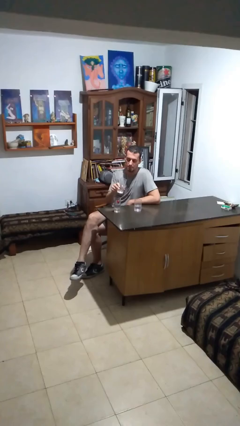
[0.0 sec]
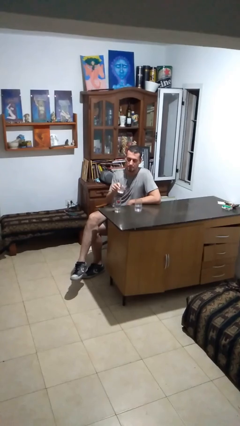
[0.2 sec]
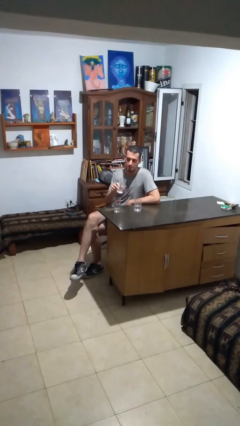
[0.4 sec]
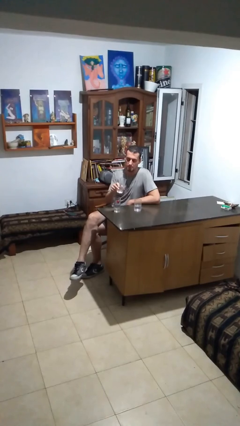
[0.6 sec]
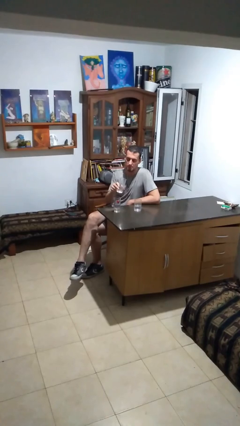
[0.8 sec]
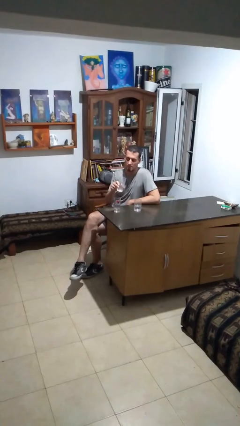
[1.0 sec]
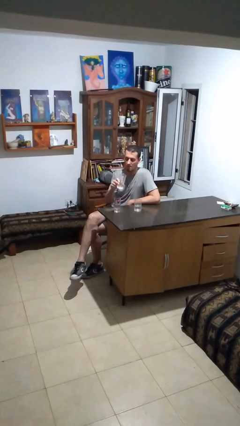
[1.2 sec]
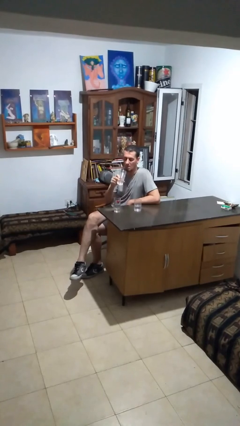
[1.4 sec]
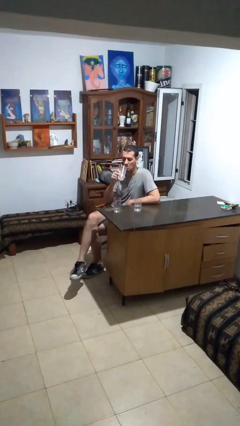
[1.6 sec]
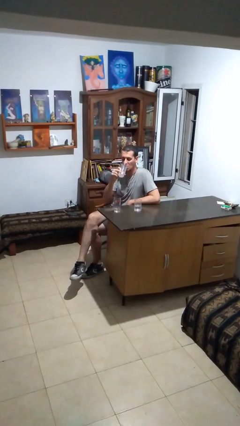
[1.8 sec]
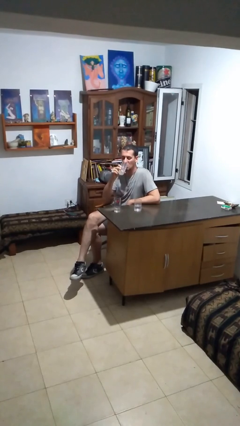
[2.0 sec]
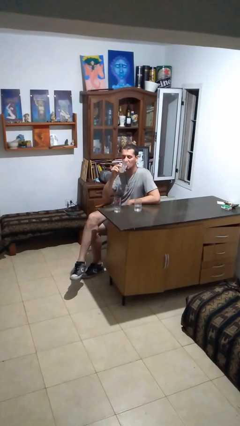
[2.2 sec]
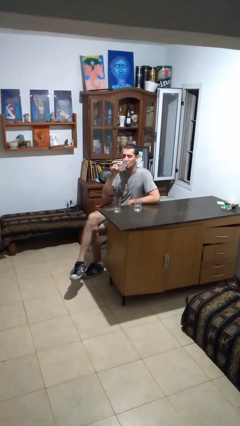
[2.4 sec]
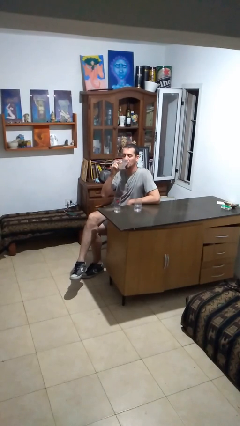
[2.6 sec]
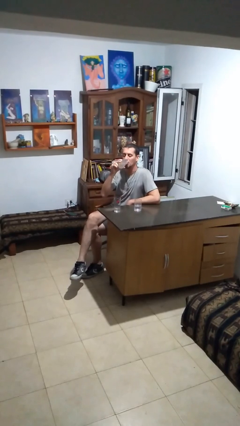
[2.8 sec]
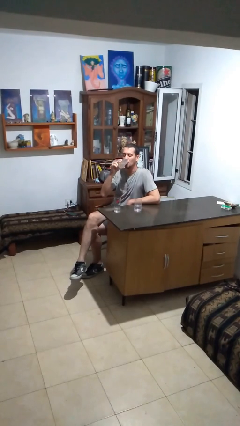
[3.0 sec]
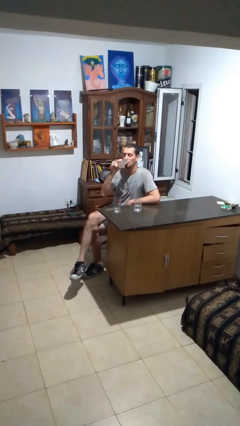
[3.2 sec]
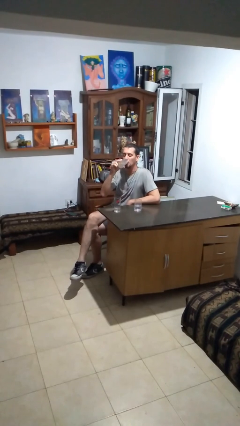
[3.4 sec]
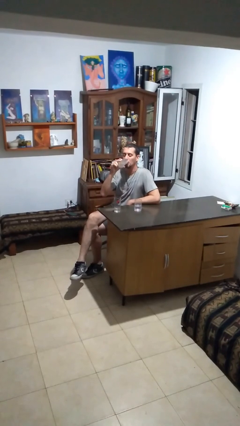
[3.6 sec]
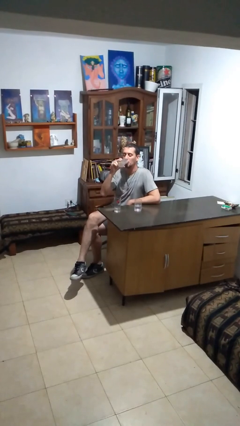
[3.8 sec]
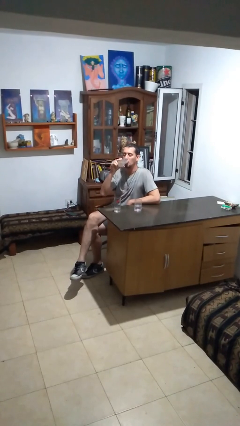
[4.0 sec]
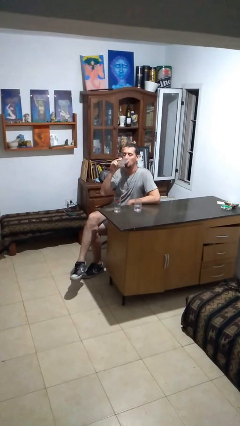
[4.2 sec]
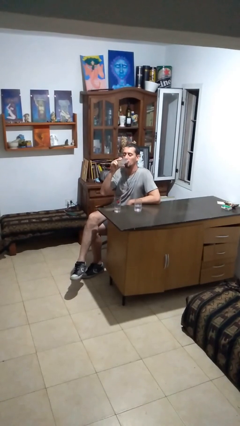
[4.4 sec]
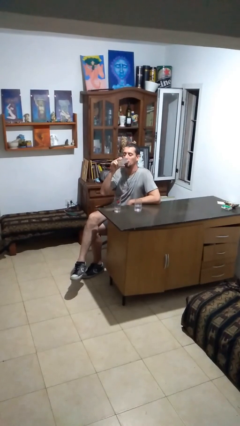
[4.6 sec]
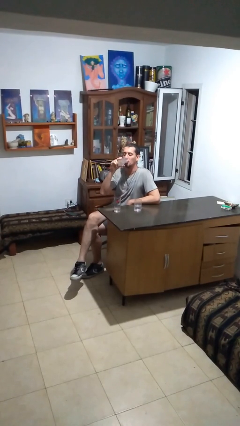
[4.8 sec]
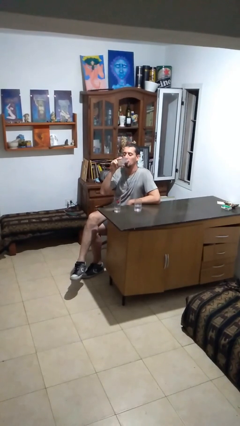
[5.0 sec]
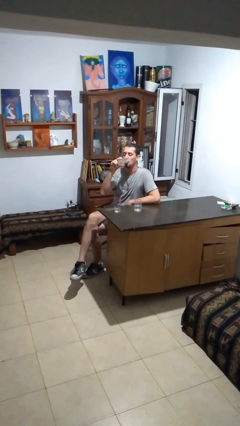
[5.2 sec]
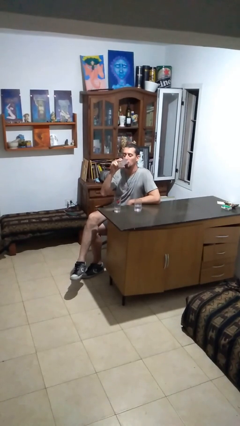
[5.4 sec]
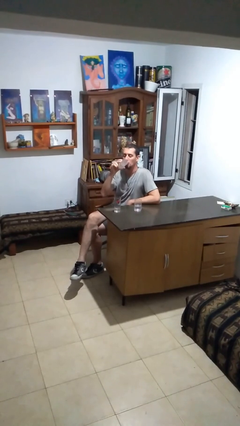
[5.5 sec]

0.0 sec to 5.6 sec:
person drinks from shotglass

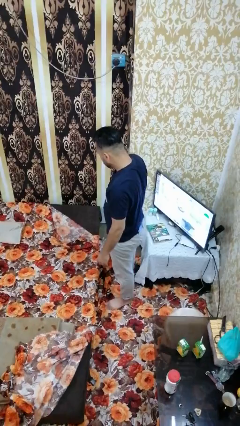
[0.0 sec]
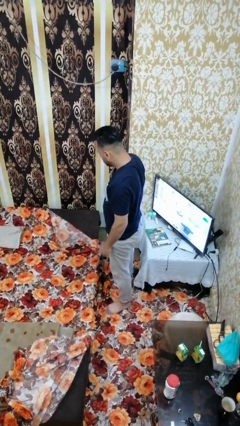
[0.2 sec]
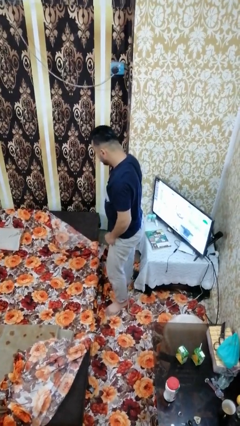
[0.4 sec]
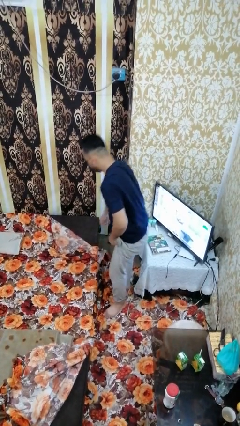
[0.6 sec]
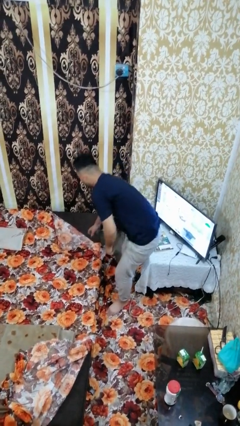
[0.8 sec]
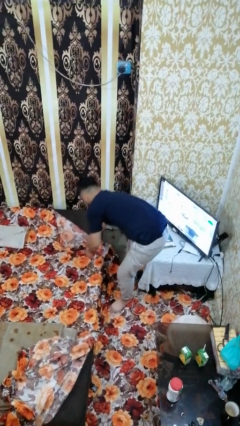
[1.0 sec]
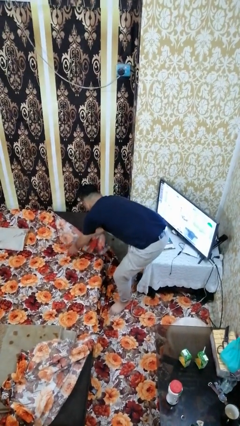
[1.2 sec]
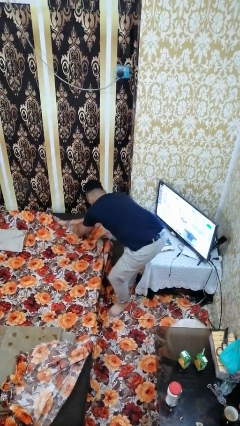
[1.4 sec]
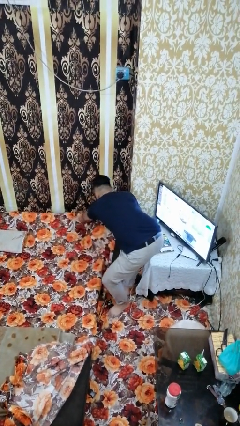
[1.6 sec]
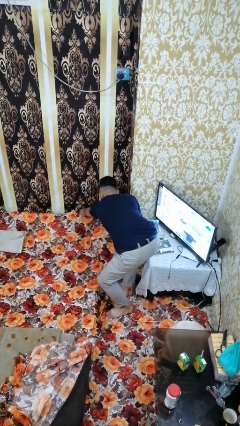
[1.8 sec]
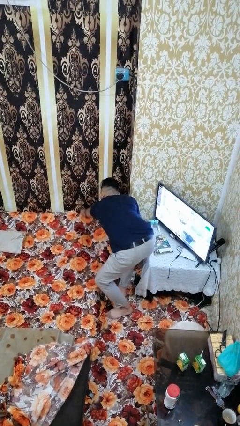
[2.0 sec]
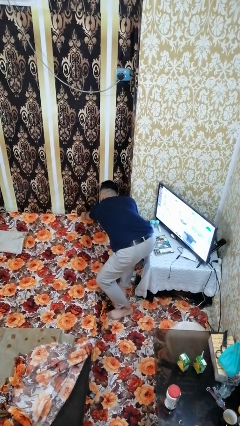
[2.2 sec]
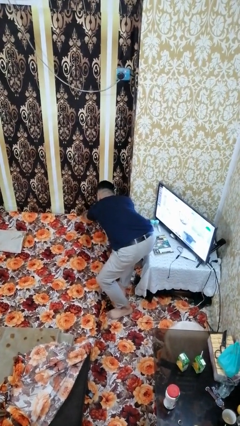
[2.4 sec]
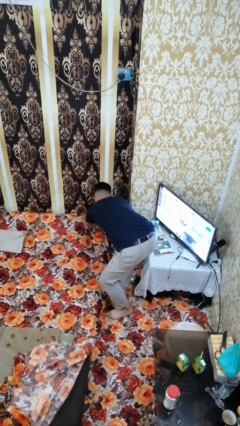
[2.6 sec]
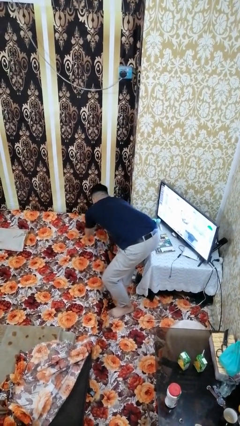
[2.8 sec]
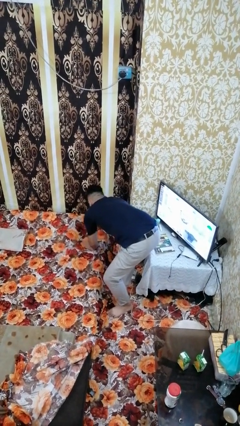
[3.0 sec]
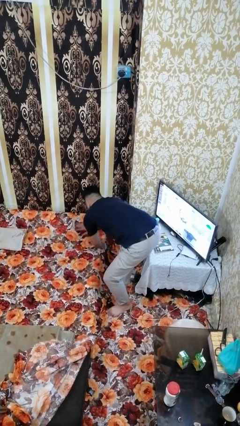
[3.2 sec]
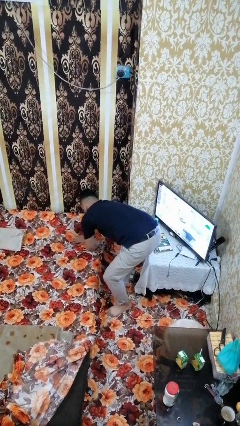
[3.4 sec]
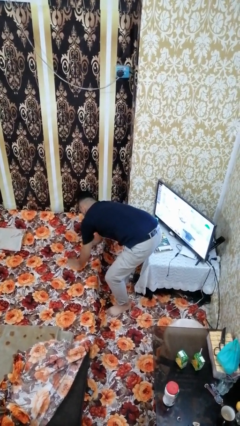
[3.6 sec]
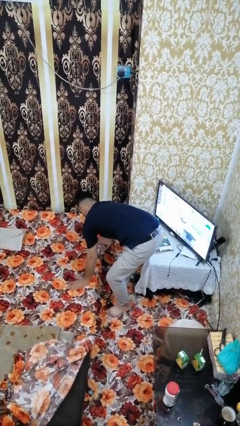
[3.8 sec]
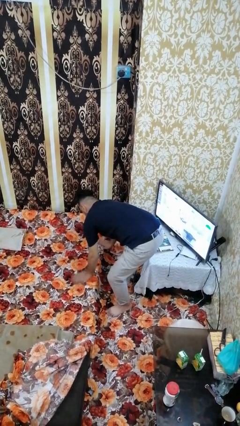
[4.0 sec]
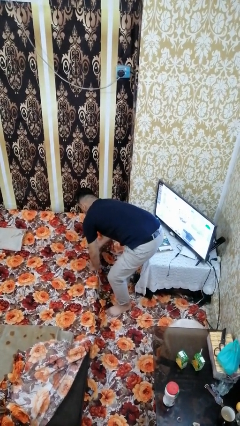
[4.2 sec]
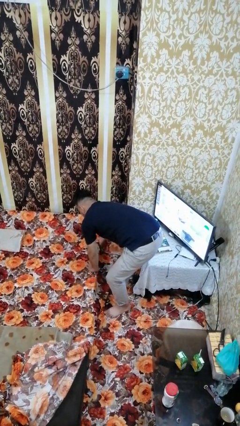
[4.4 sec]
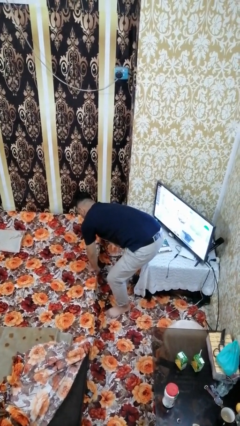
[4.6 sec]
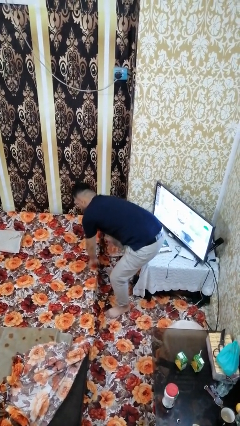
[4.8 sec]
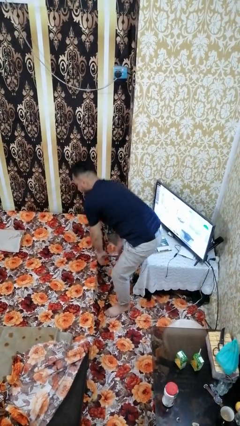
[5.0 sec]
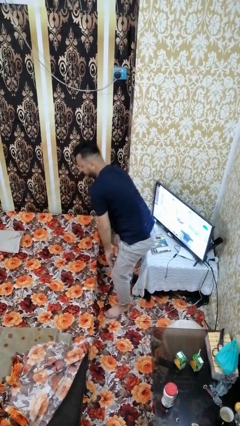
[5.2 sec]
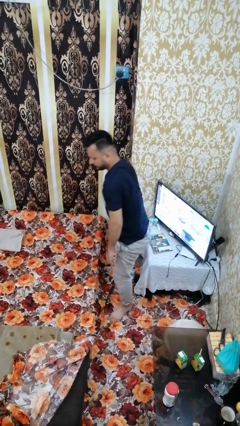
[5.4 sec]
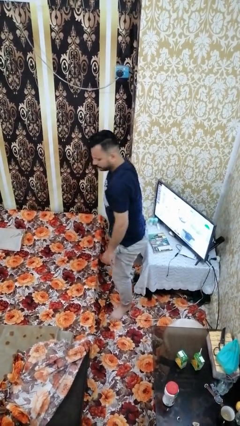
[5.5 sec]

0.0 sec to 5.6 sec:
person makes bed

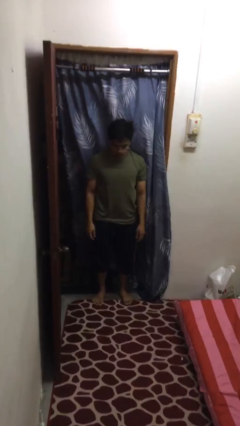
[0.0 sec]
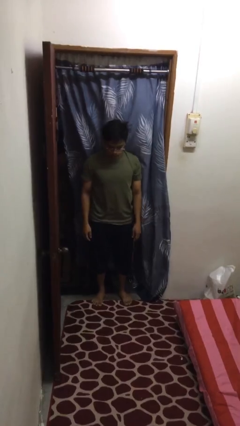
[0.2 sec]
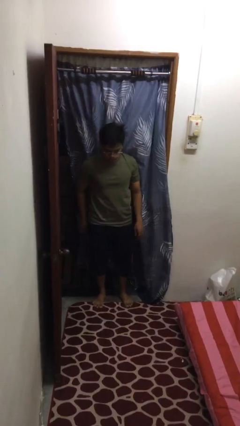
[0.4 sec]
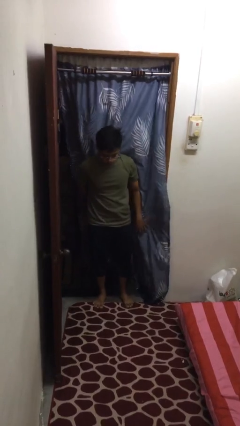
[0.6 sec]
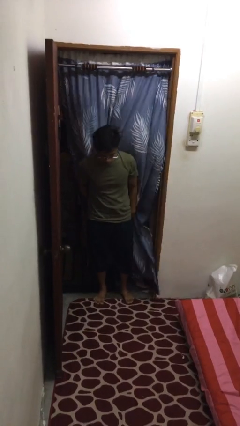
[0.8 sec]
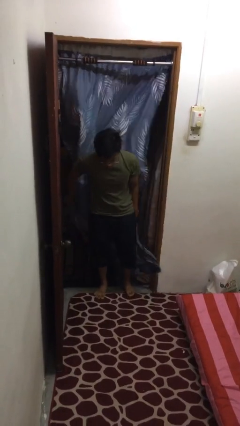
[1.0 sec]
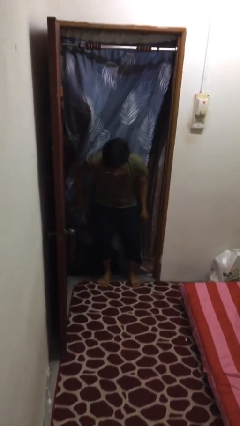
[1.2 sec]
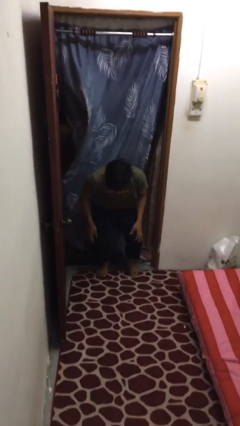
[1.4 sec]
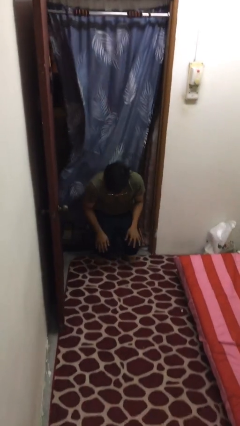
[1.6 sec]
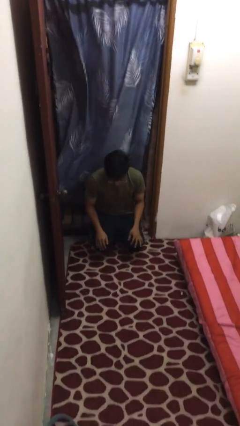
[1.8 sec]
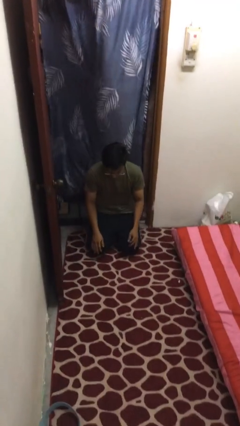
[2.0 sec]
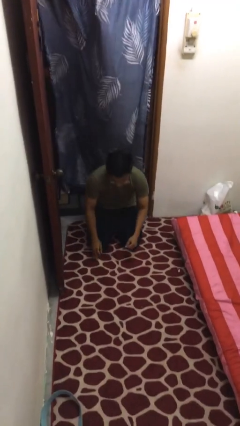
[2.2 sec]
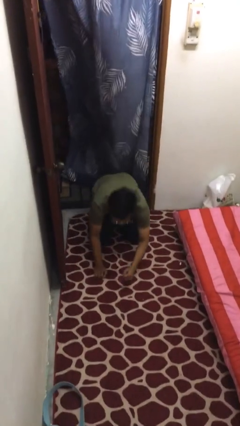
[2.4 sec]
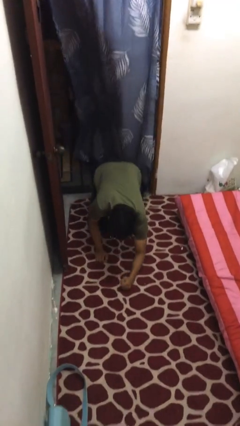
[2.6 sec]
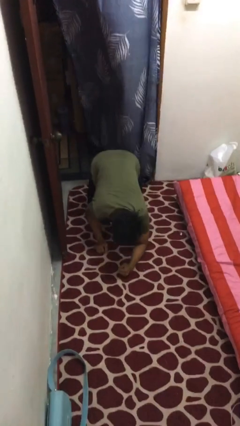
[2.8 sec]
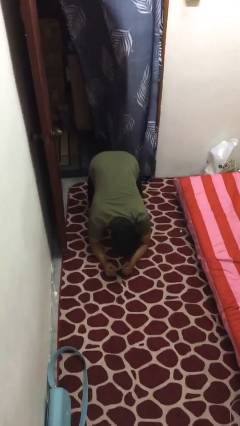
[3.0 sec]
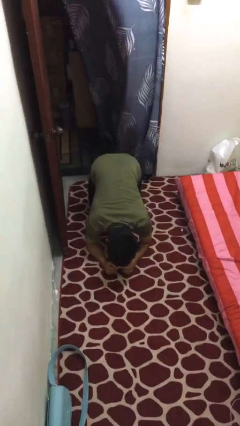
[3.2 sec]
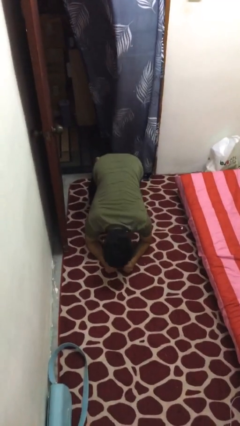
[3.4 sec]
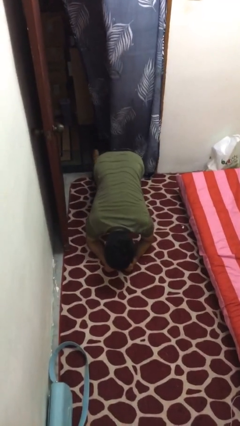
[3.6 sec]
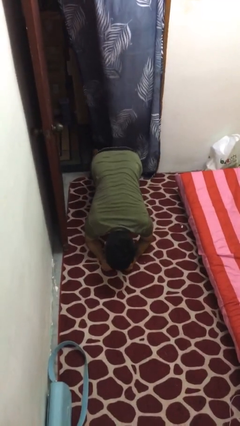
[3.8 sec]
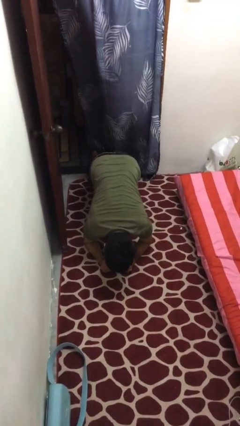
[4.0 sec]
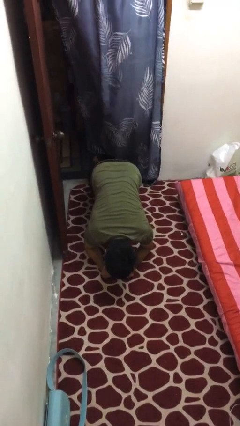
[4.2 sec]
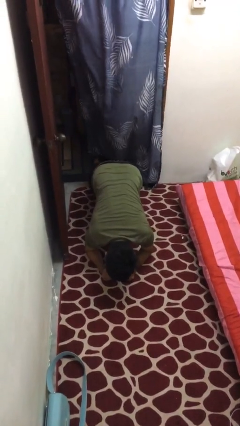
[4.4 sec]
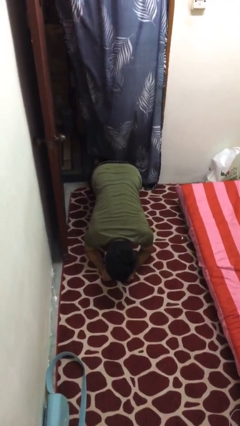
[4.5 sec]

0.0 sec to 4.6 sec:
person exercises with plank

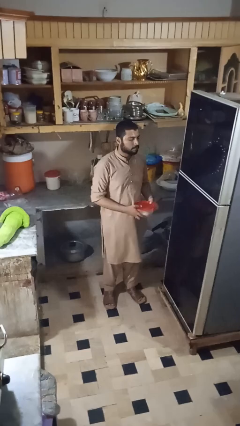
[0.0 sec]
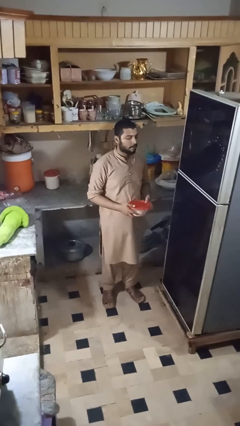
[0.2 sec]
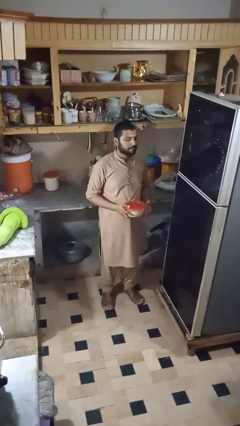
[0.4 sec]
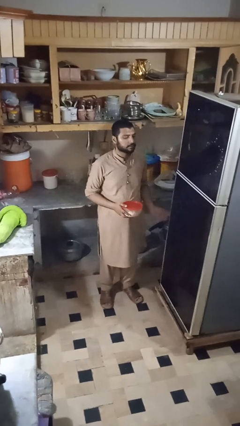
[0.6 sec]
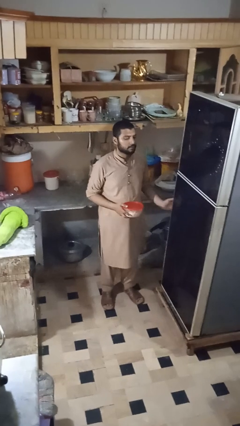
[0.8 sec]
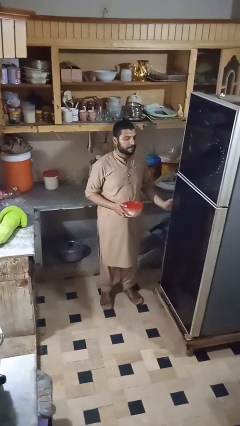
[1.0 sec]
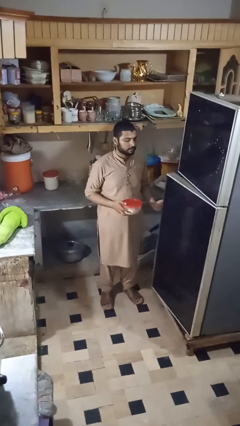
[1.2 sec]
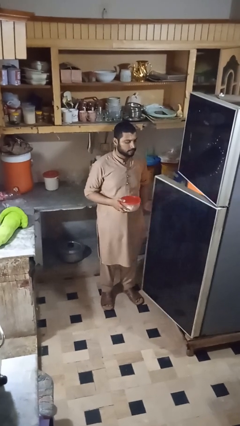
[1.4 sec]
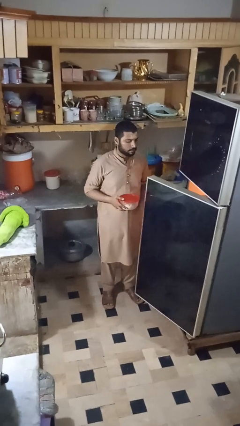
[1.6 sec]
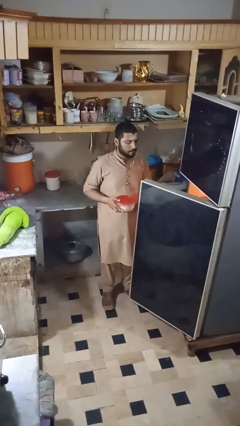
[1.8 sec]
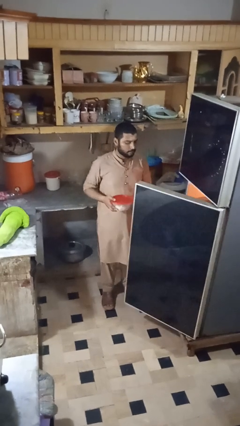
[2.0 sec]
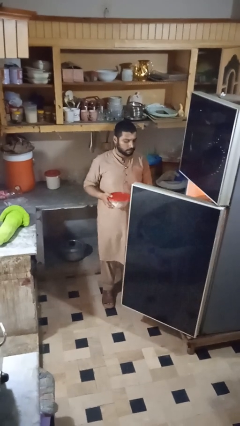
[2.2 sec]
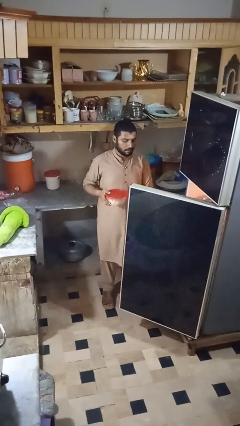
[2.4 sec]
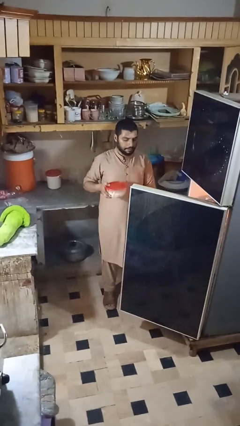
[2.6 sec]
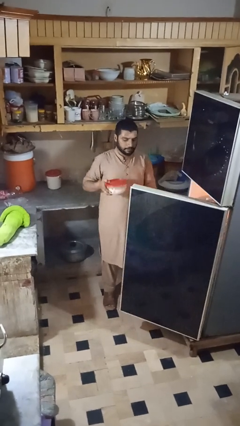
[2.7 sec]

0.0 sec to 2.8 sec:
person opens refrigerator
